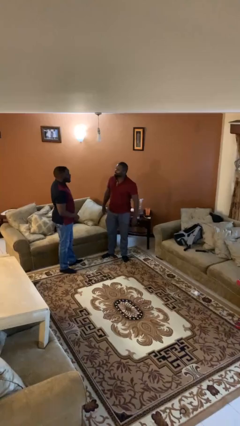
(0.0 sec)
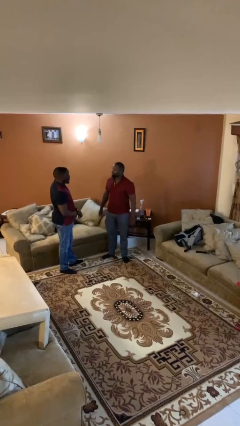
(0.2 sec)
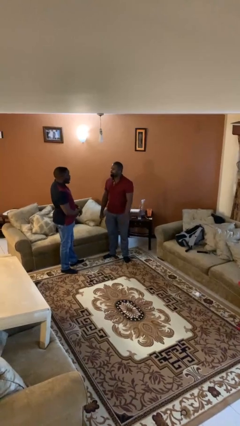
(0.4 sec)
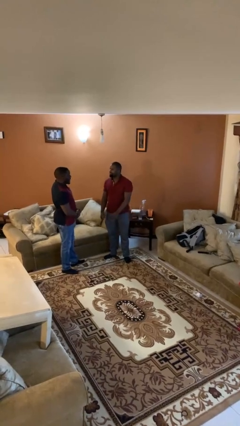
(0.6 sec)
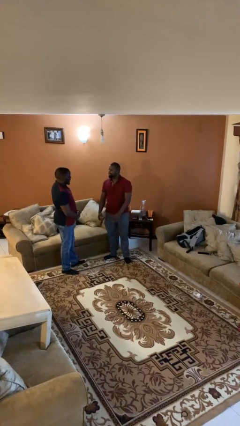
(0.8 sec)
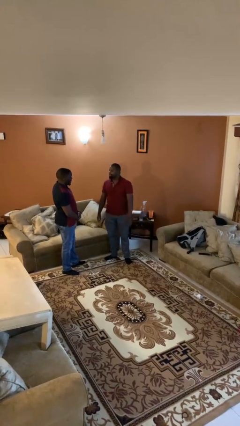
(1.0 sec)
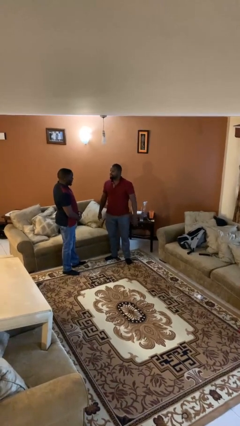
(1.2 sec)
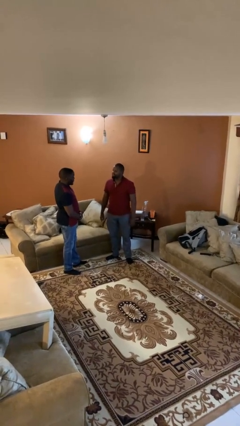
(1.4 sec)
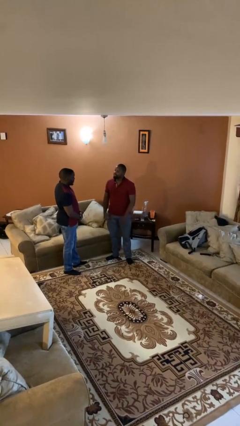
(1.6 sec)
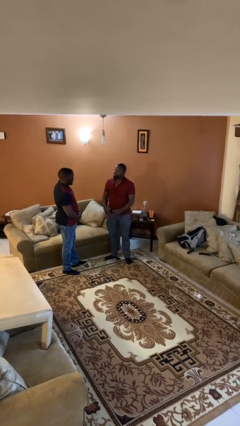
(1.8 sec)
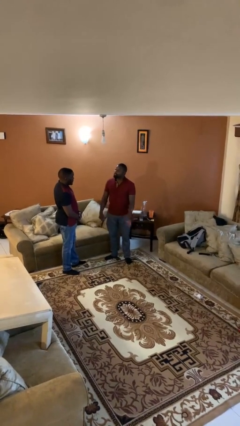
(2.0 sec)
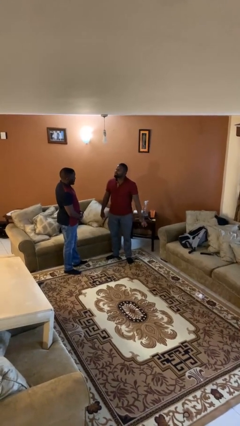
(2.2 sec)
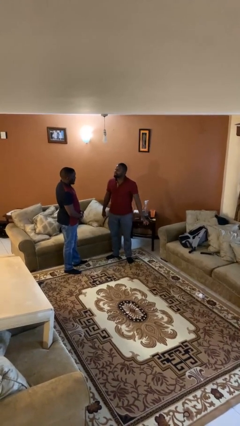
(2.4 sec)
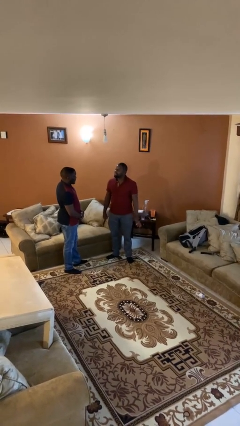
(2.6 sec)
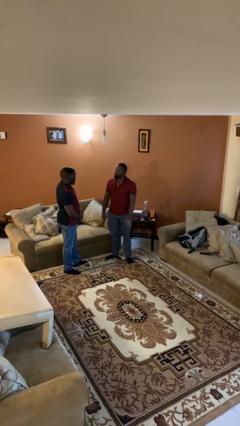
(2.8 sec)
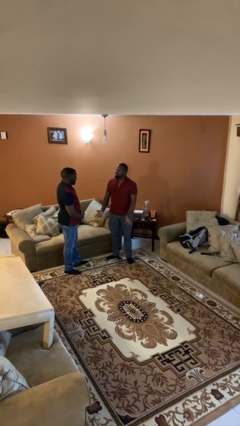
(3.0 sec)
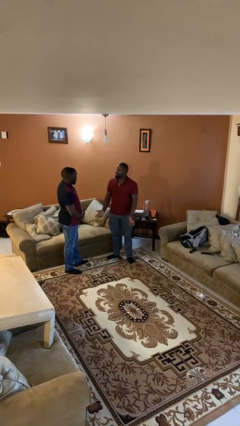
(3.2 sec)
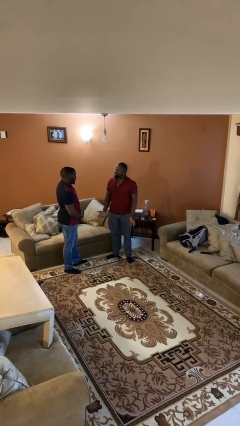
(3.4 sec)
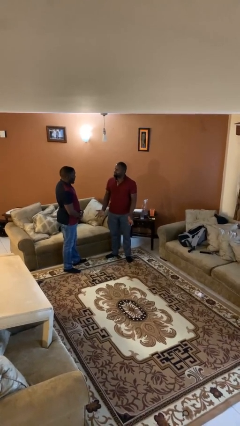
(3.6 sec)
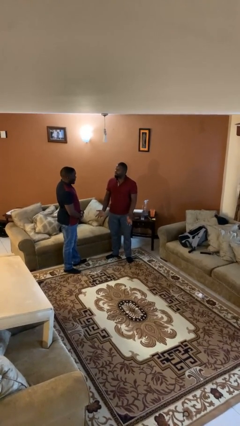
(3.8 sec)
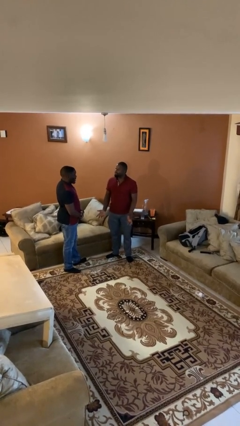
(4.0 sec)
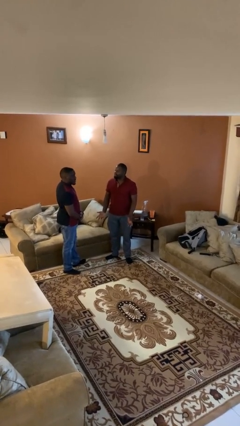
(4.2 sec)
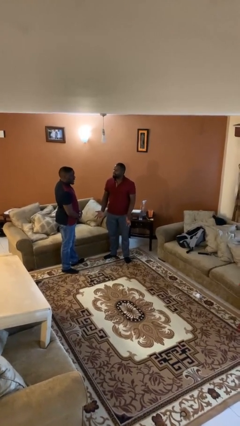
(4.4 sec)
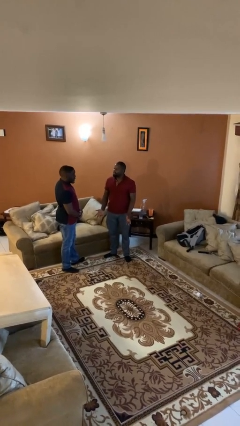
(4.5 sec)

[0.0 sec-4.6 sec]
person talks to person

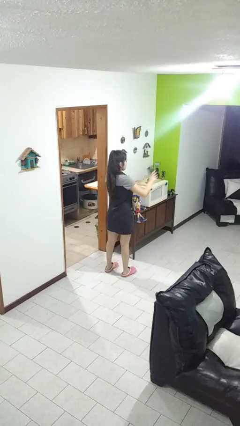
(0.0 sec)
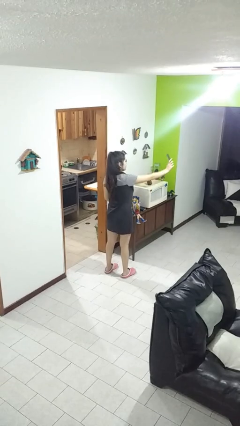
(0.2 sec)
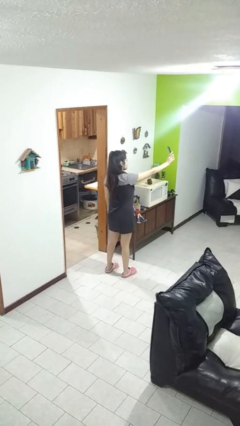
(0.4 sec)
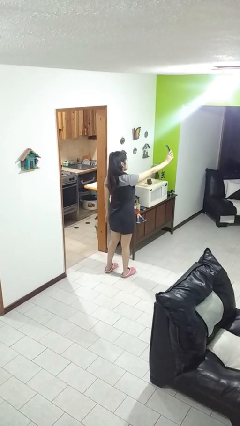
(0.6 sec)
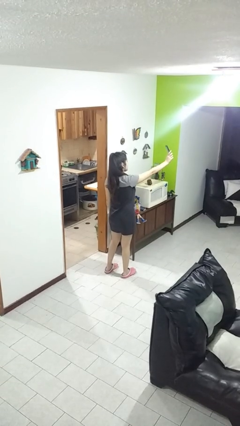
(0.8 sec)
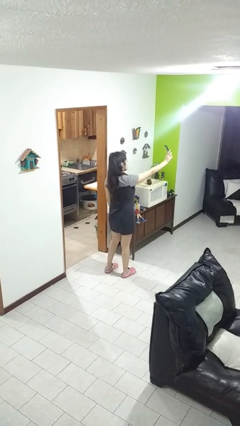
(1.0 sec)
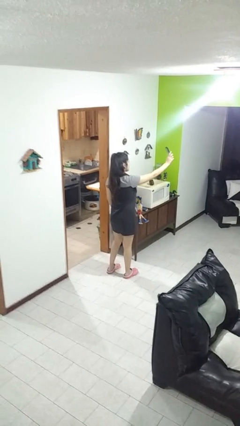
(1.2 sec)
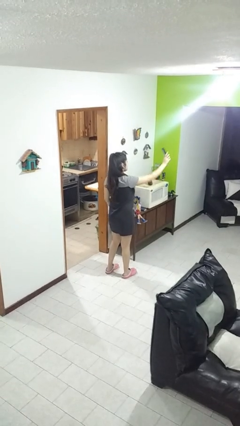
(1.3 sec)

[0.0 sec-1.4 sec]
person takes selfie

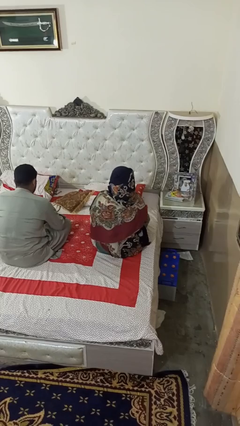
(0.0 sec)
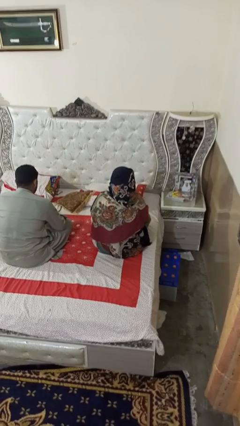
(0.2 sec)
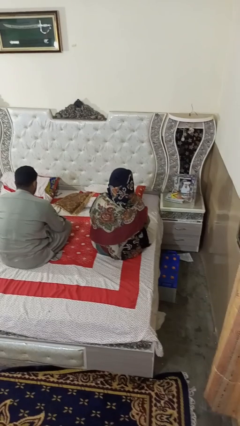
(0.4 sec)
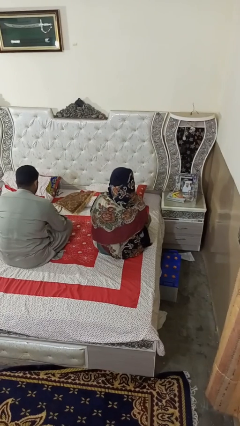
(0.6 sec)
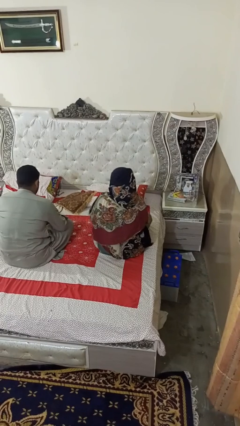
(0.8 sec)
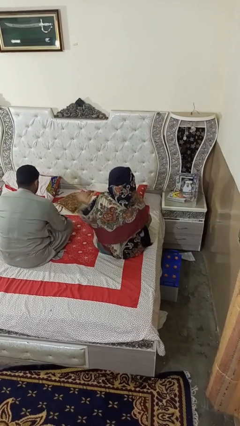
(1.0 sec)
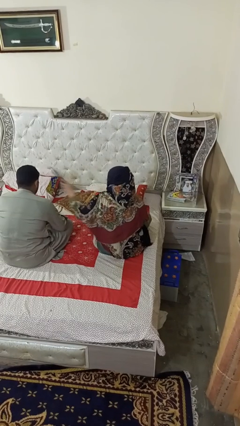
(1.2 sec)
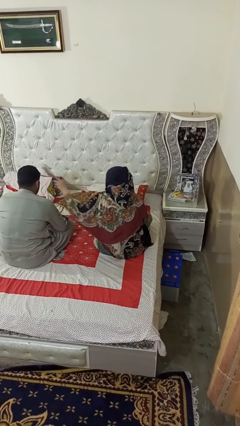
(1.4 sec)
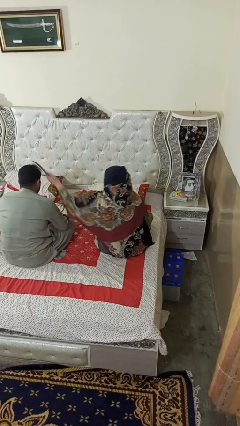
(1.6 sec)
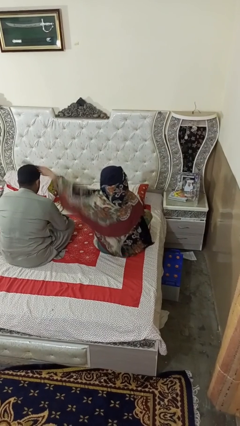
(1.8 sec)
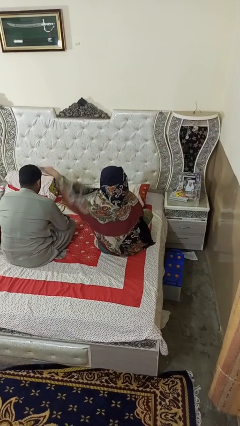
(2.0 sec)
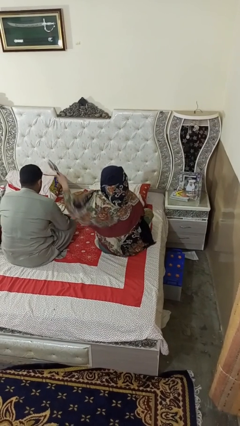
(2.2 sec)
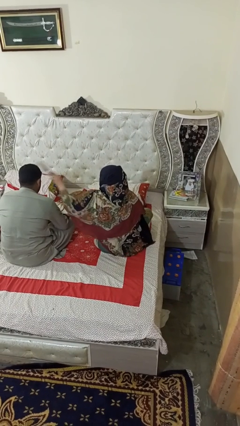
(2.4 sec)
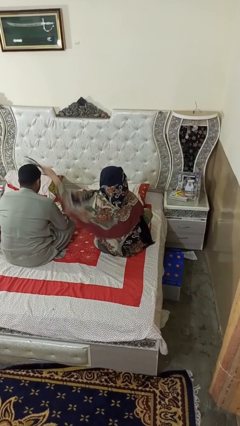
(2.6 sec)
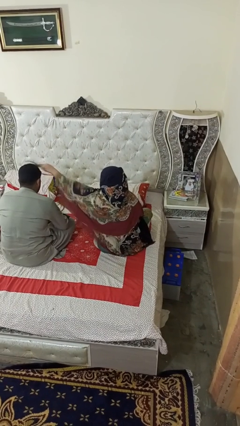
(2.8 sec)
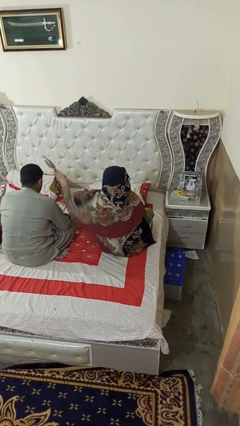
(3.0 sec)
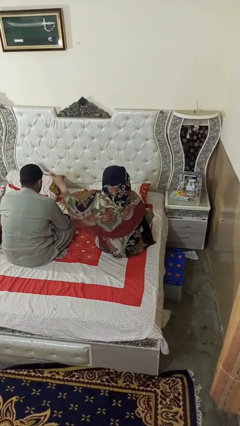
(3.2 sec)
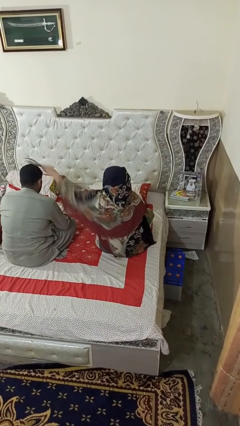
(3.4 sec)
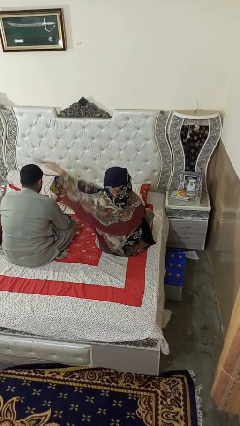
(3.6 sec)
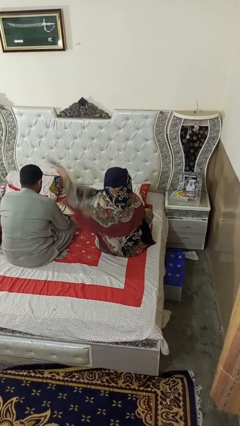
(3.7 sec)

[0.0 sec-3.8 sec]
person brushes hair of person

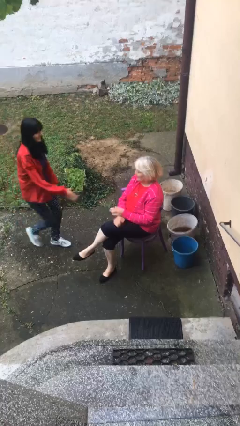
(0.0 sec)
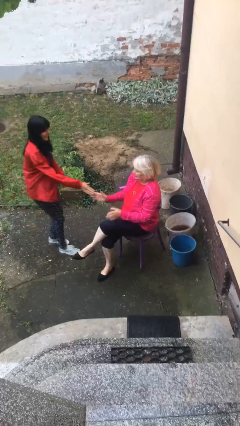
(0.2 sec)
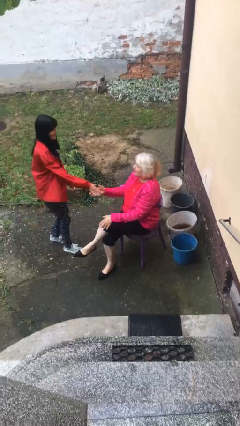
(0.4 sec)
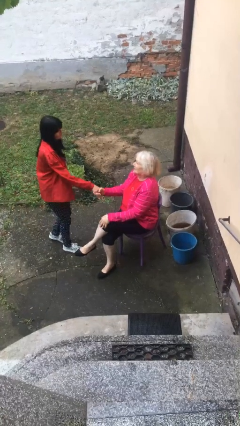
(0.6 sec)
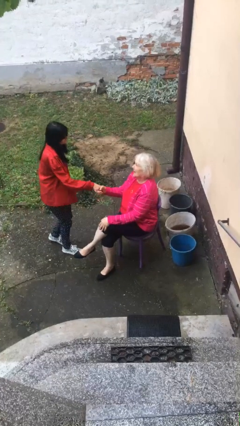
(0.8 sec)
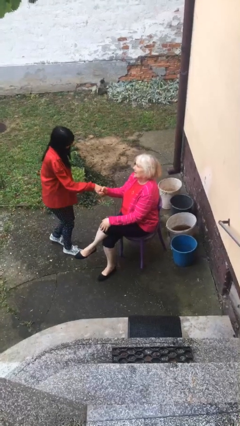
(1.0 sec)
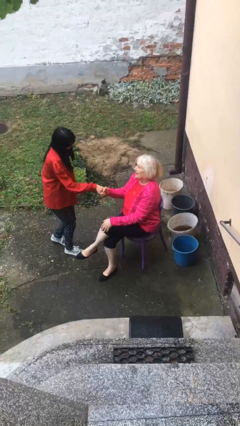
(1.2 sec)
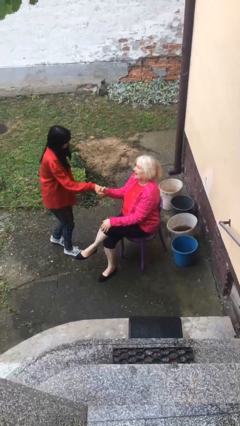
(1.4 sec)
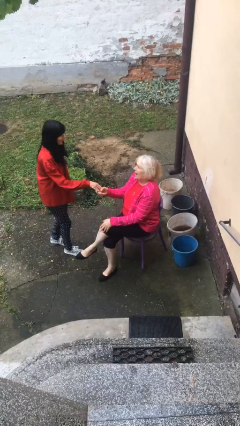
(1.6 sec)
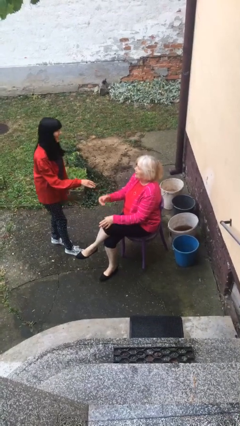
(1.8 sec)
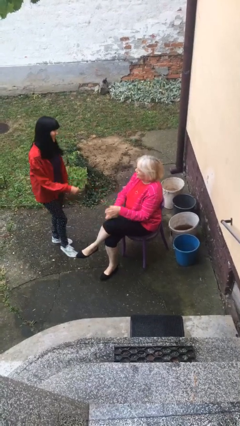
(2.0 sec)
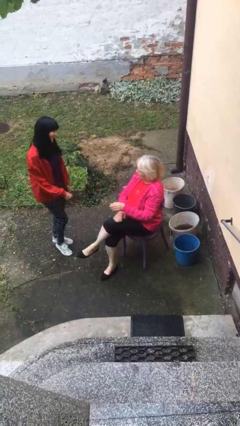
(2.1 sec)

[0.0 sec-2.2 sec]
person shakes hand

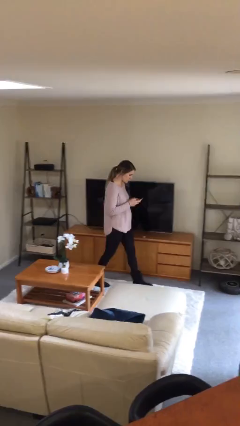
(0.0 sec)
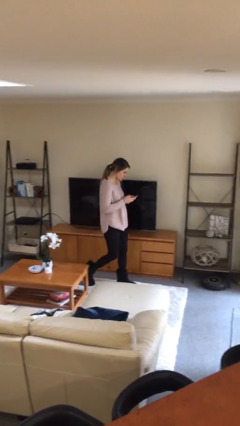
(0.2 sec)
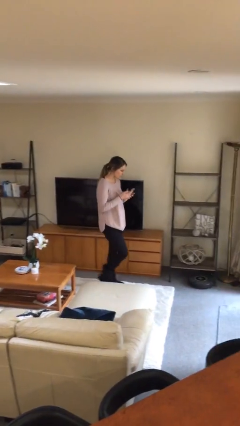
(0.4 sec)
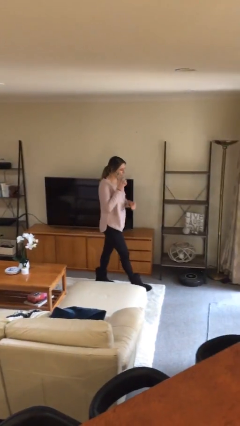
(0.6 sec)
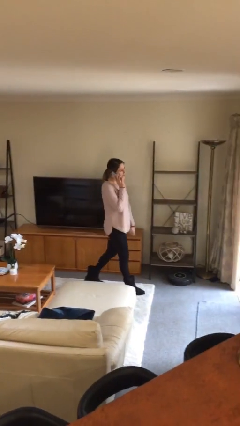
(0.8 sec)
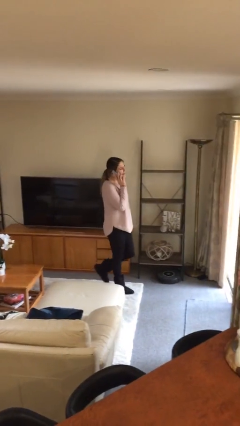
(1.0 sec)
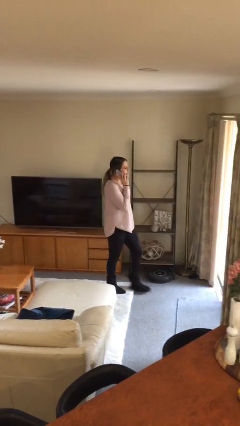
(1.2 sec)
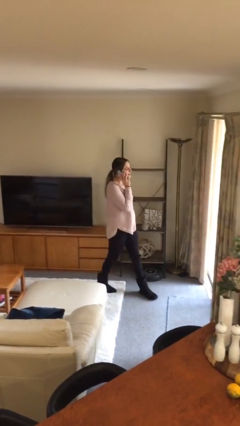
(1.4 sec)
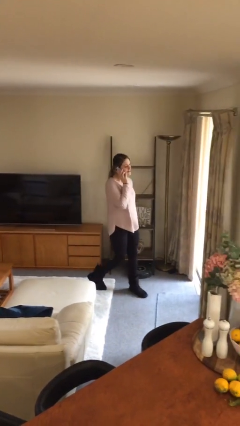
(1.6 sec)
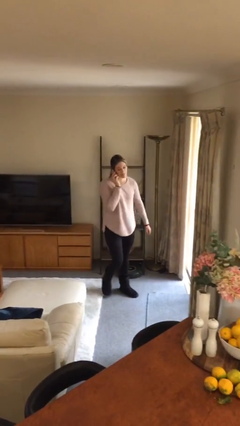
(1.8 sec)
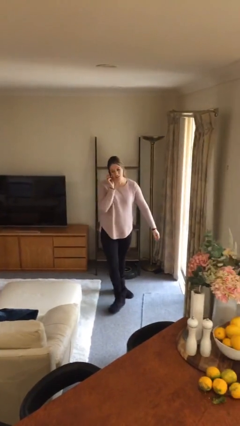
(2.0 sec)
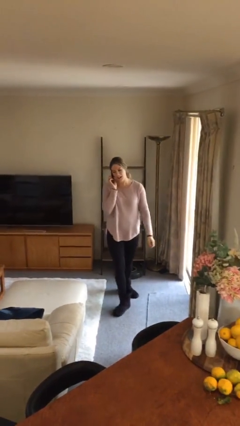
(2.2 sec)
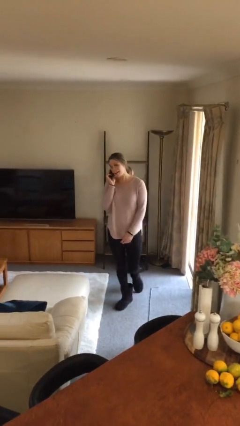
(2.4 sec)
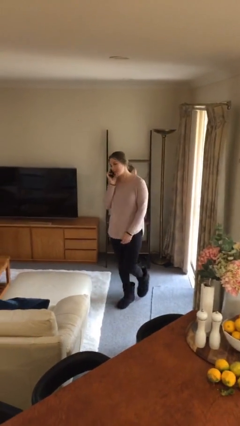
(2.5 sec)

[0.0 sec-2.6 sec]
person talks on phone

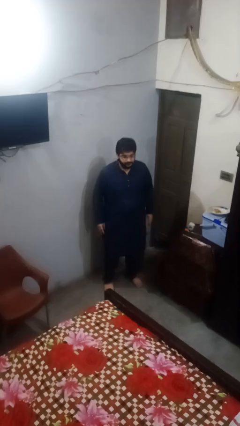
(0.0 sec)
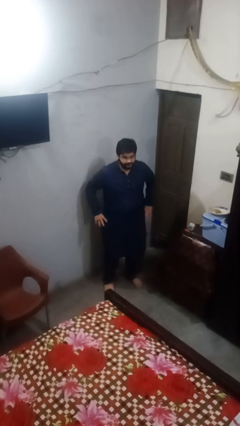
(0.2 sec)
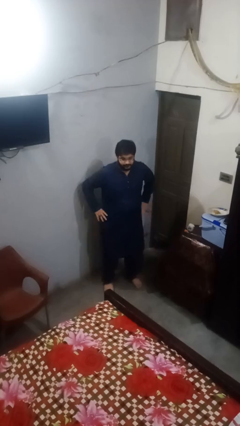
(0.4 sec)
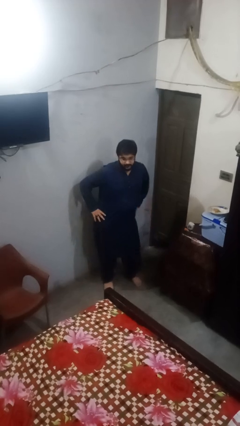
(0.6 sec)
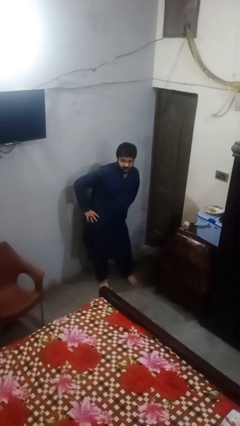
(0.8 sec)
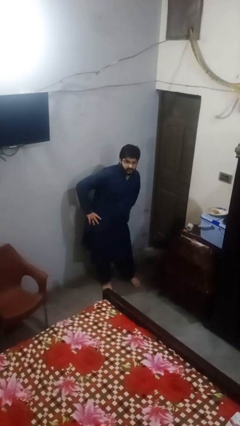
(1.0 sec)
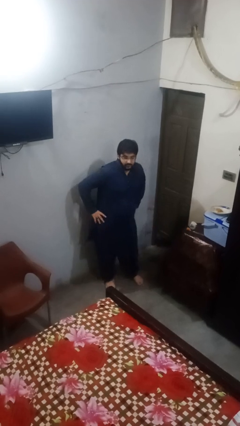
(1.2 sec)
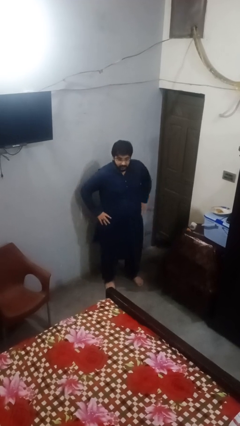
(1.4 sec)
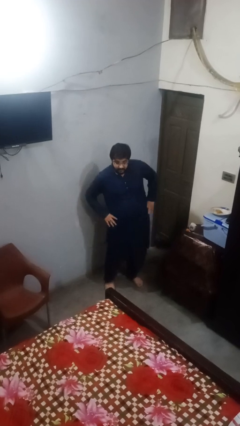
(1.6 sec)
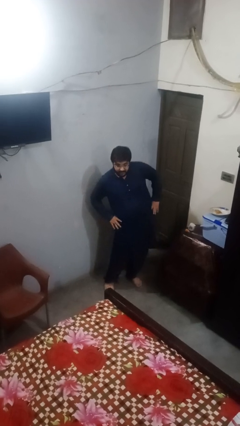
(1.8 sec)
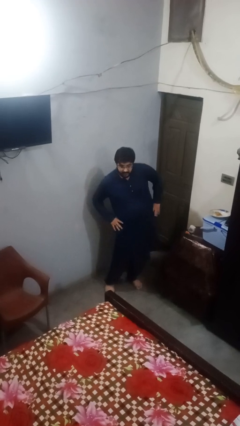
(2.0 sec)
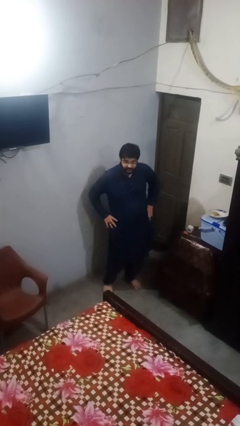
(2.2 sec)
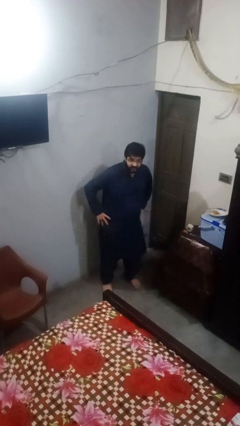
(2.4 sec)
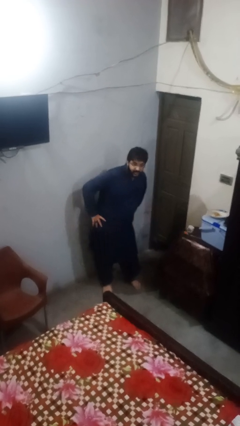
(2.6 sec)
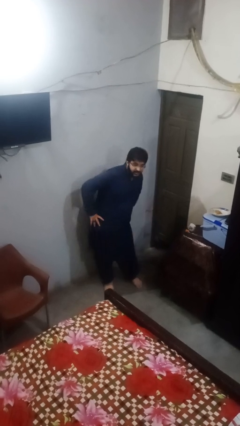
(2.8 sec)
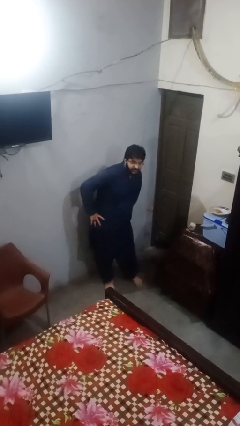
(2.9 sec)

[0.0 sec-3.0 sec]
person wiggles hips
